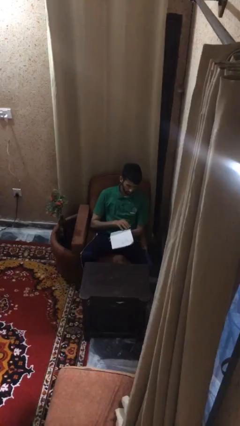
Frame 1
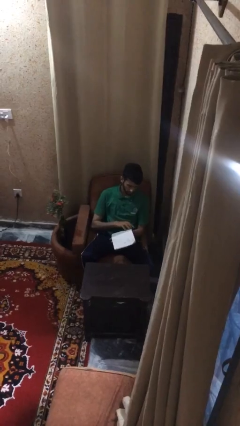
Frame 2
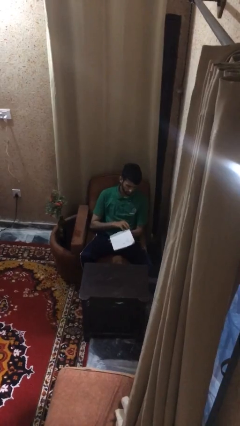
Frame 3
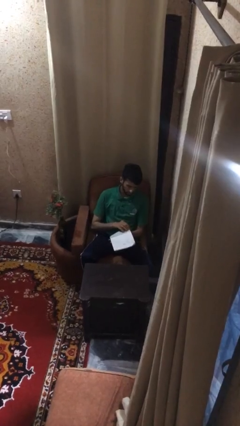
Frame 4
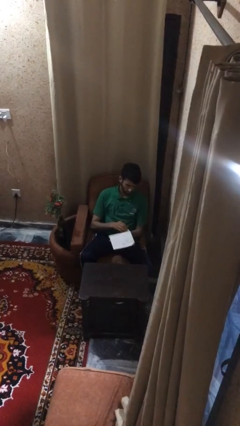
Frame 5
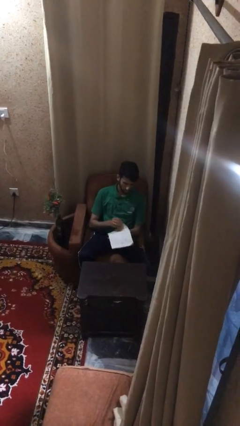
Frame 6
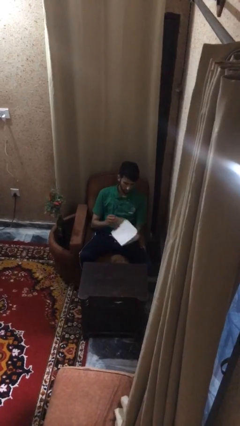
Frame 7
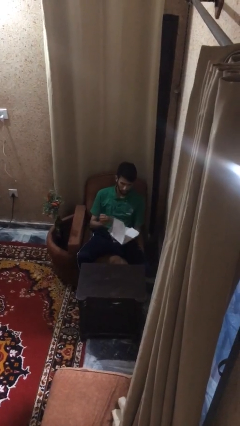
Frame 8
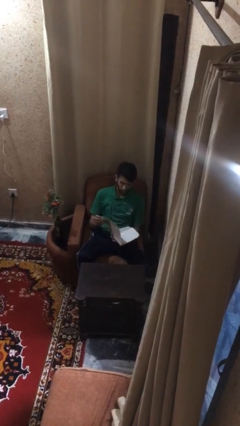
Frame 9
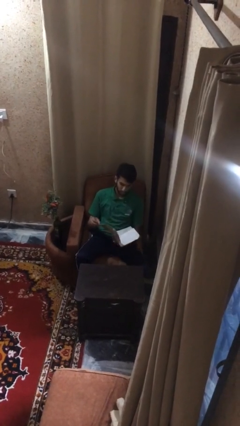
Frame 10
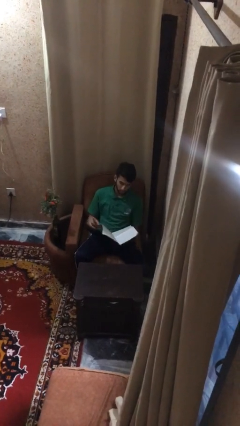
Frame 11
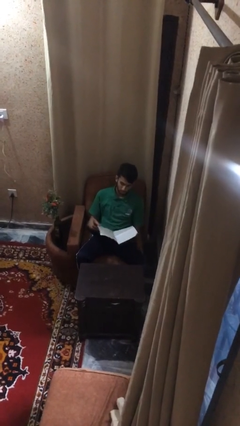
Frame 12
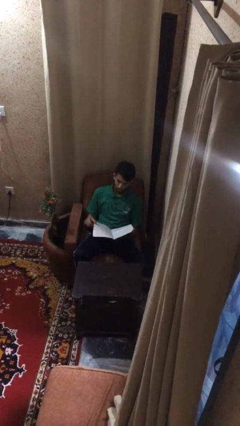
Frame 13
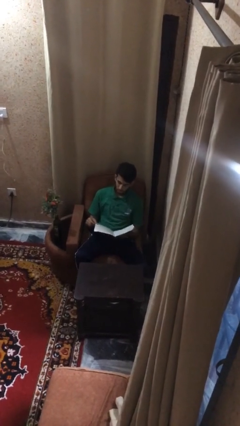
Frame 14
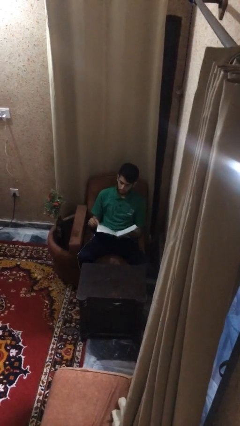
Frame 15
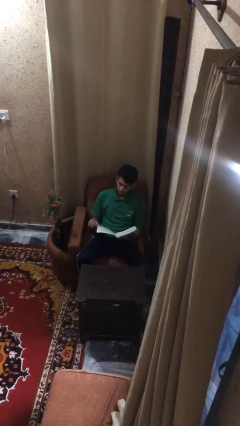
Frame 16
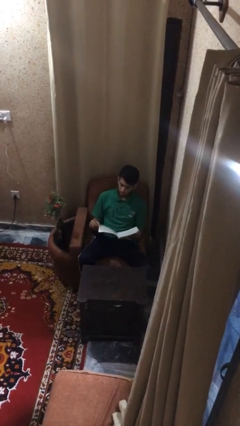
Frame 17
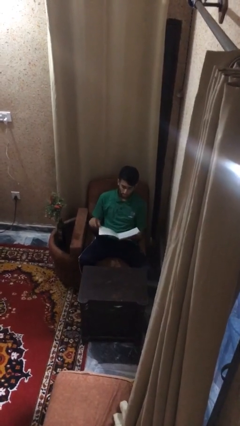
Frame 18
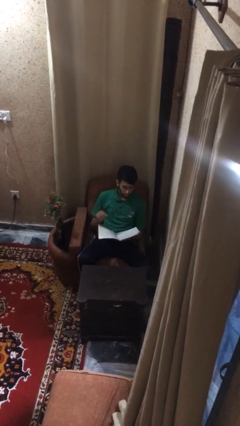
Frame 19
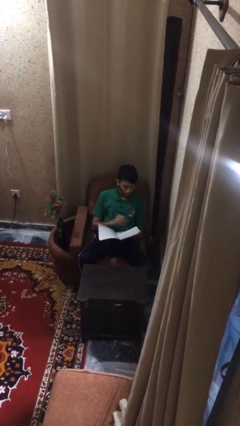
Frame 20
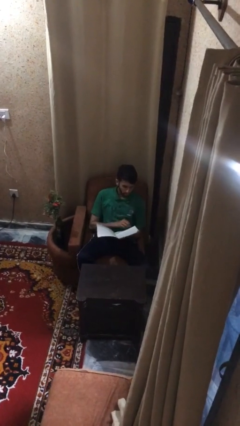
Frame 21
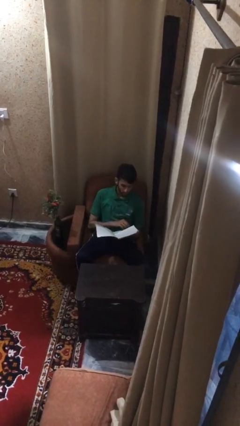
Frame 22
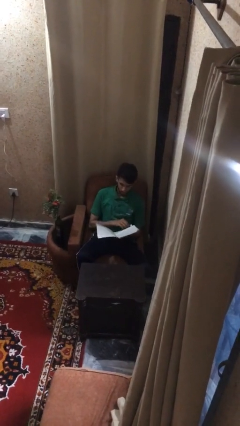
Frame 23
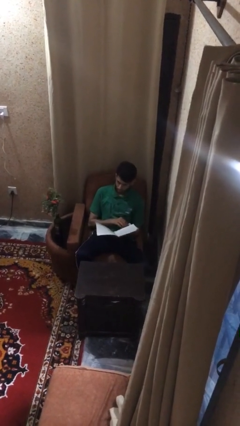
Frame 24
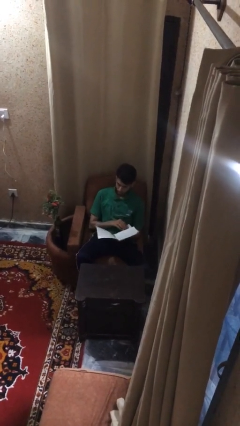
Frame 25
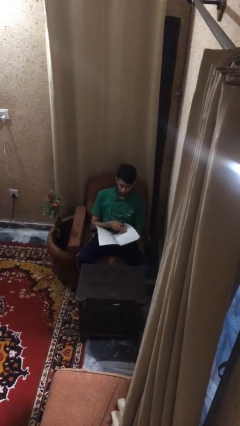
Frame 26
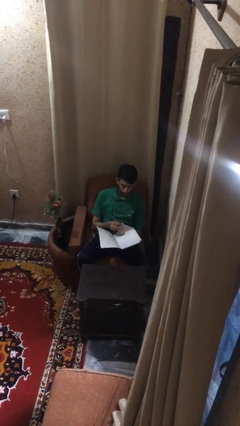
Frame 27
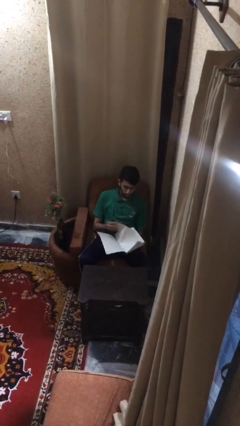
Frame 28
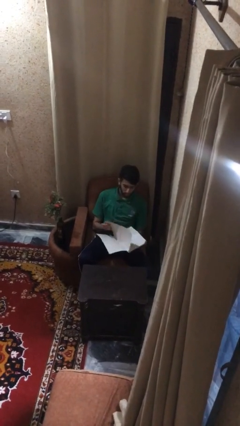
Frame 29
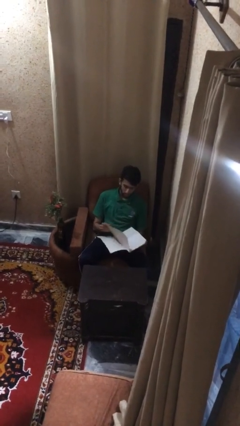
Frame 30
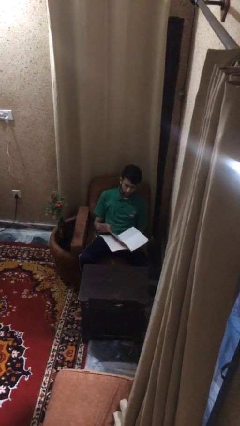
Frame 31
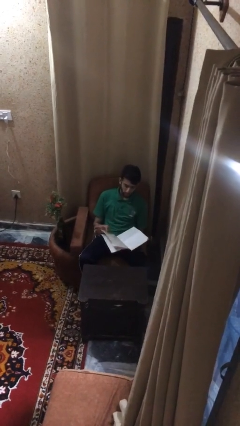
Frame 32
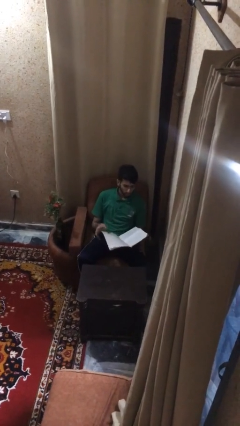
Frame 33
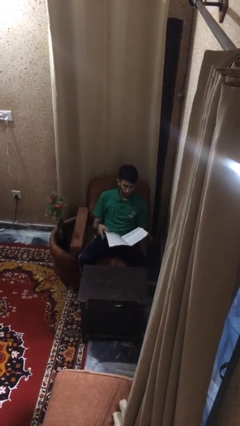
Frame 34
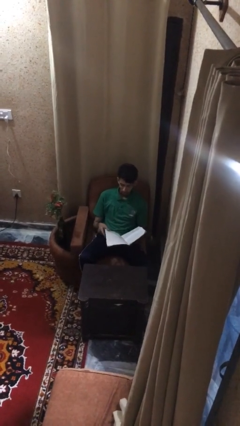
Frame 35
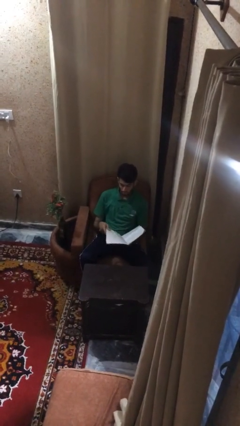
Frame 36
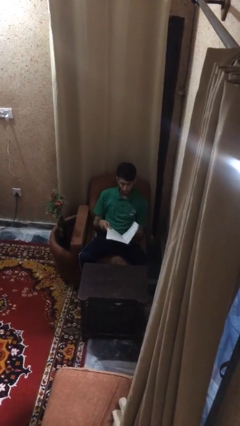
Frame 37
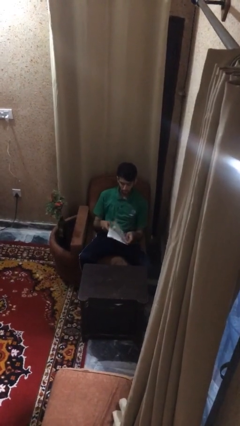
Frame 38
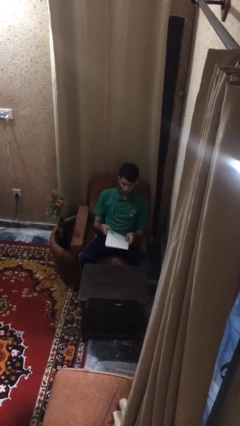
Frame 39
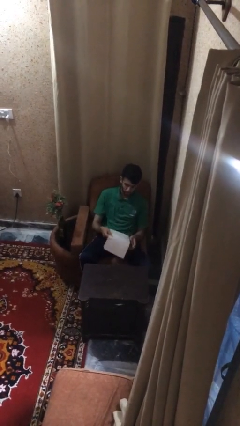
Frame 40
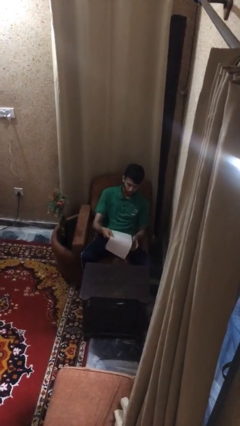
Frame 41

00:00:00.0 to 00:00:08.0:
person reads document

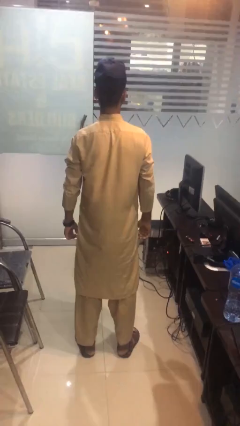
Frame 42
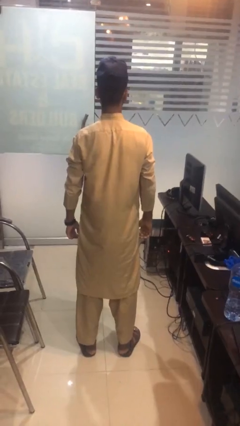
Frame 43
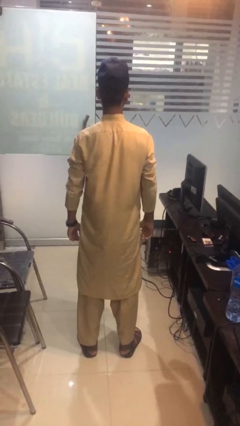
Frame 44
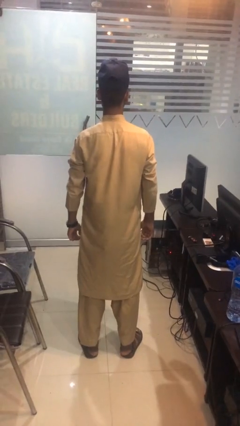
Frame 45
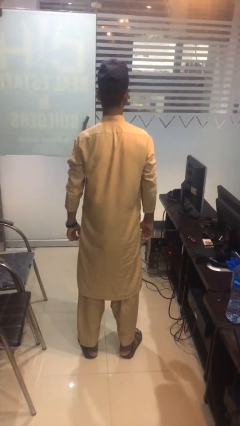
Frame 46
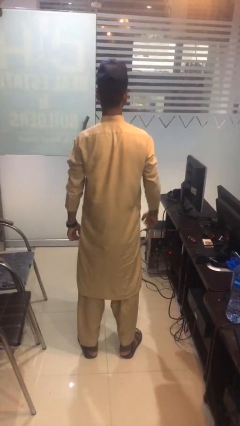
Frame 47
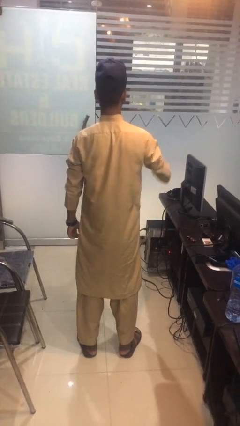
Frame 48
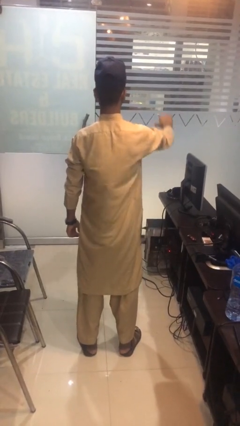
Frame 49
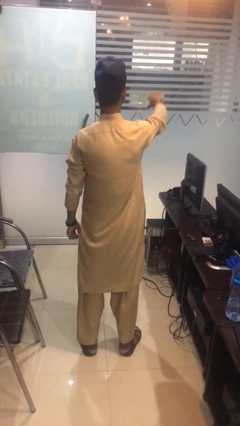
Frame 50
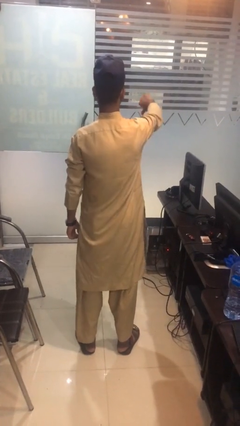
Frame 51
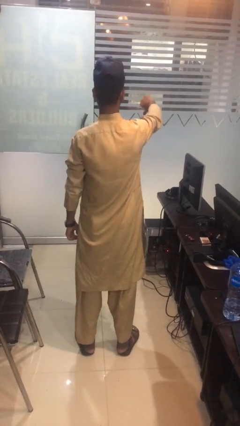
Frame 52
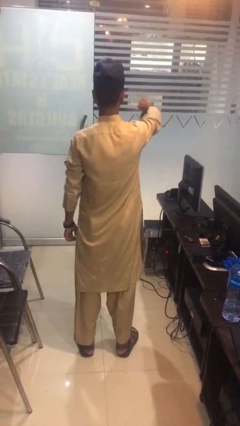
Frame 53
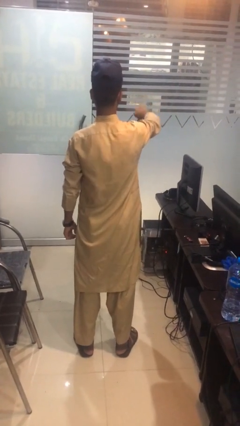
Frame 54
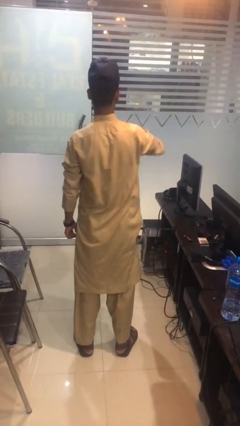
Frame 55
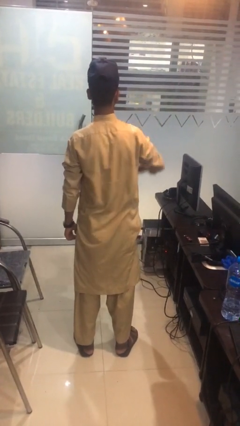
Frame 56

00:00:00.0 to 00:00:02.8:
person gestures thumbs down

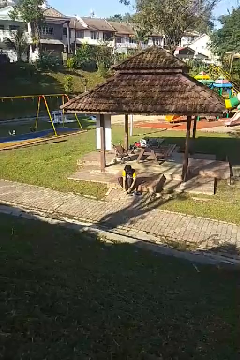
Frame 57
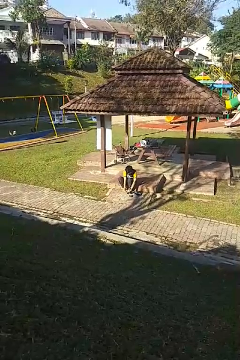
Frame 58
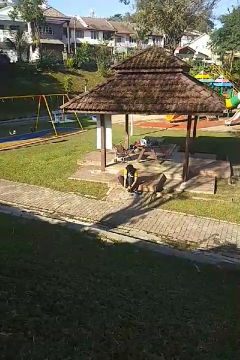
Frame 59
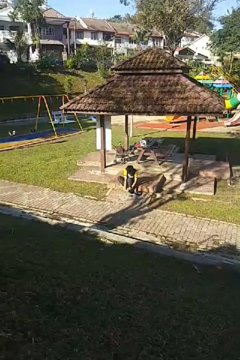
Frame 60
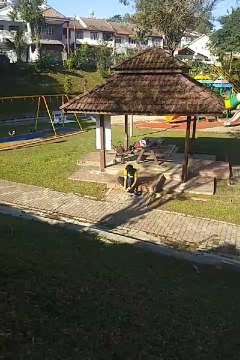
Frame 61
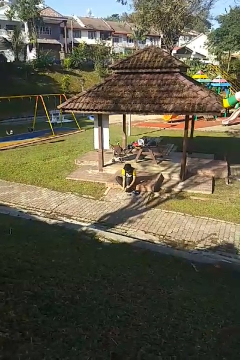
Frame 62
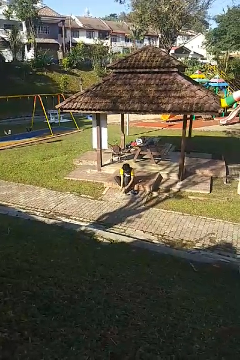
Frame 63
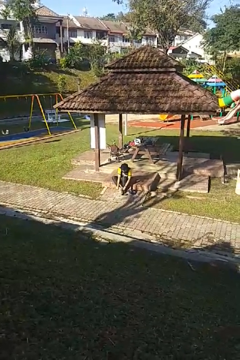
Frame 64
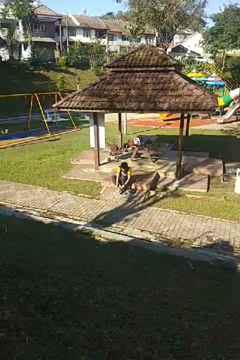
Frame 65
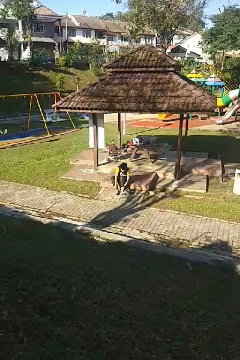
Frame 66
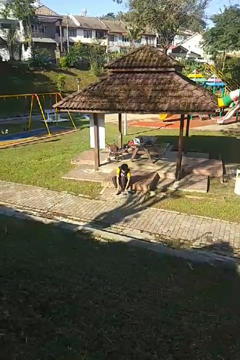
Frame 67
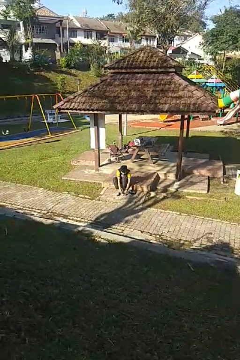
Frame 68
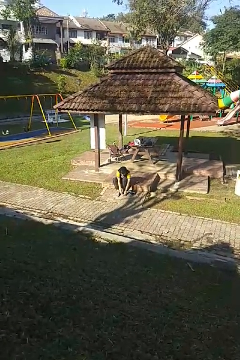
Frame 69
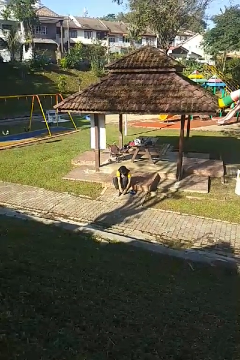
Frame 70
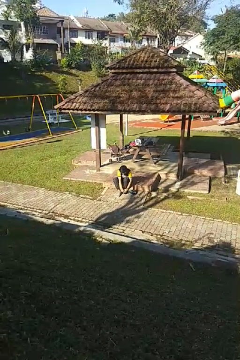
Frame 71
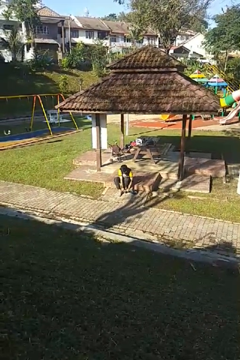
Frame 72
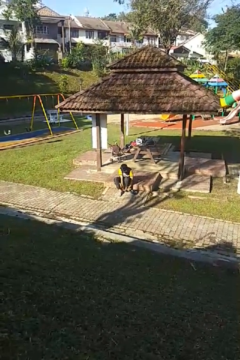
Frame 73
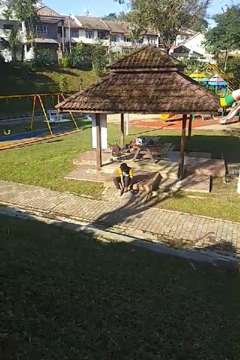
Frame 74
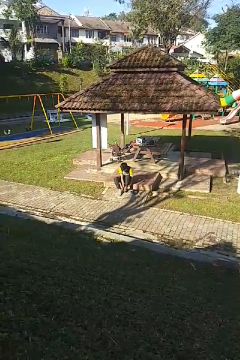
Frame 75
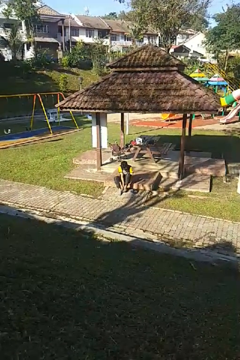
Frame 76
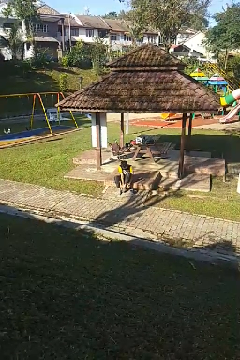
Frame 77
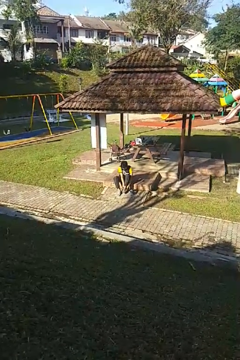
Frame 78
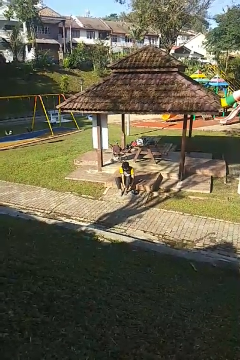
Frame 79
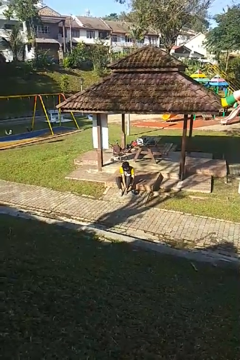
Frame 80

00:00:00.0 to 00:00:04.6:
person puts on socks

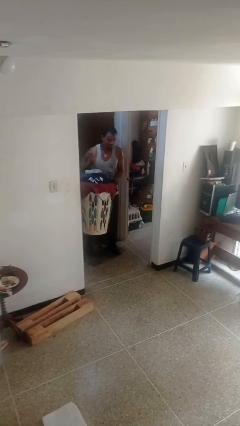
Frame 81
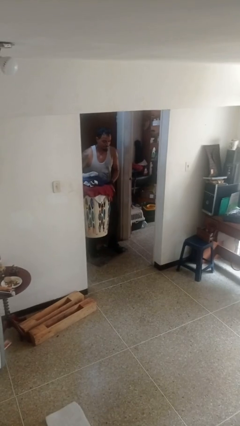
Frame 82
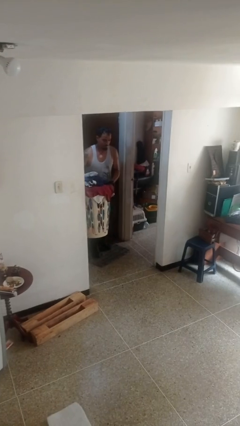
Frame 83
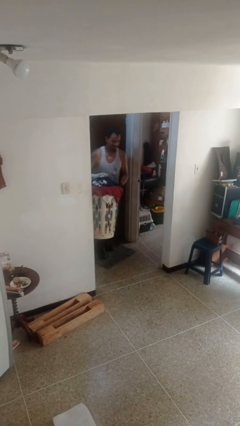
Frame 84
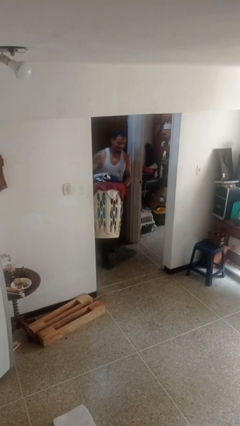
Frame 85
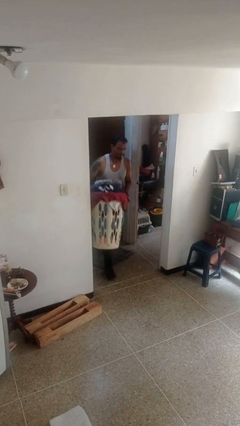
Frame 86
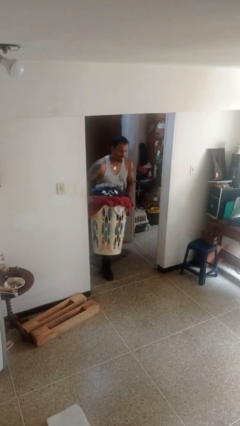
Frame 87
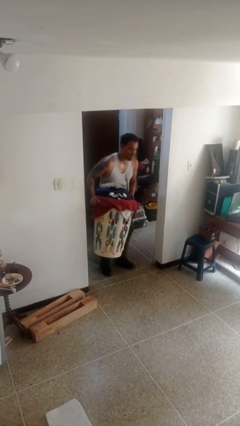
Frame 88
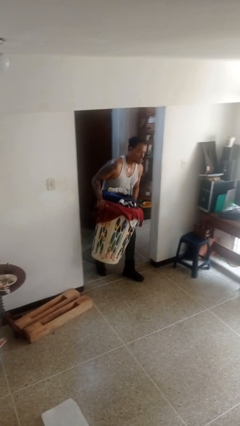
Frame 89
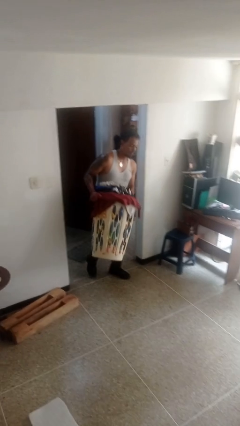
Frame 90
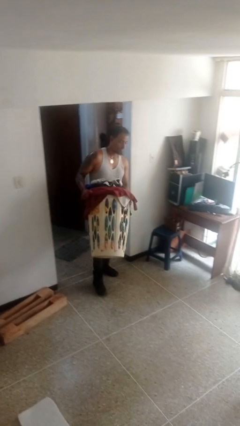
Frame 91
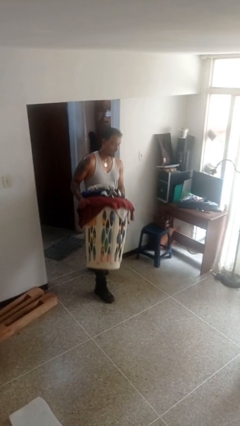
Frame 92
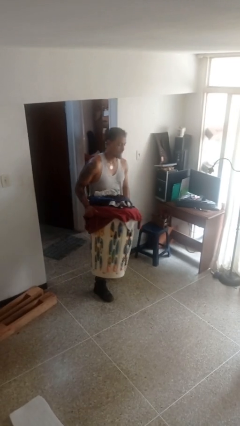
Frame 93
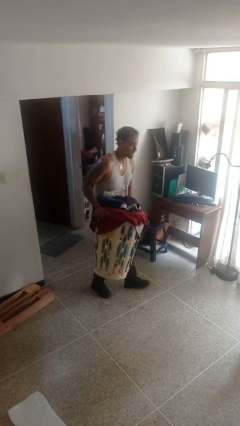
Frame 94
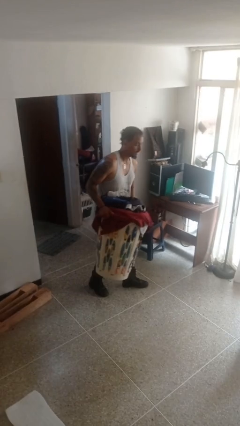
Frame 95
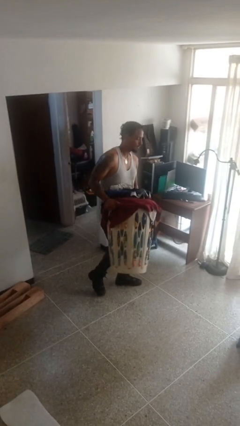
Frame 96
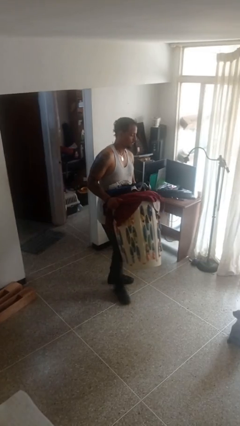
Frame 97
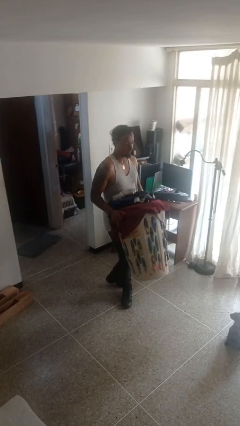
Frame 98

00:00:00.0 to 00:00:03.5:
person carries laundry basket
